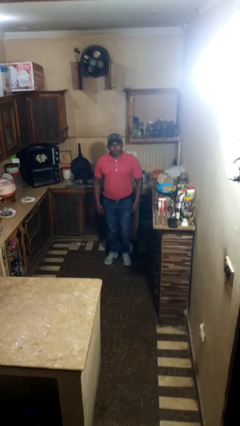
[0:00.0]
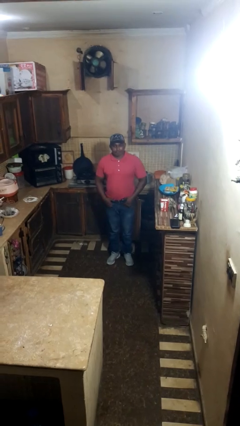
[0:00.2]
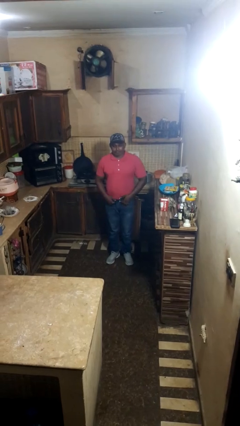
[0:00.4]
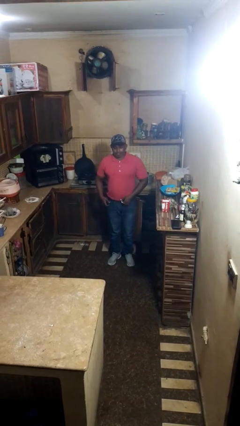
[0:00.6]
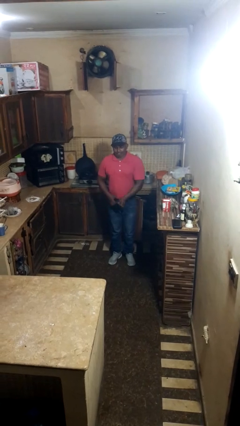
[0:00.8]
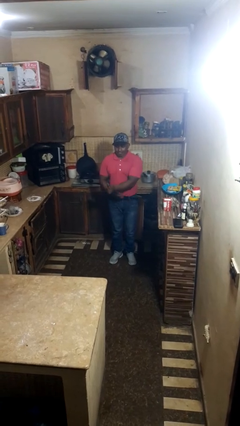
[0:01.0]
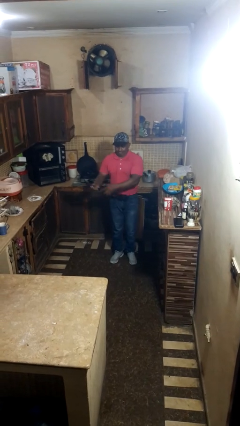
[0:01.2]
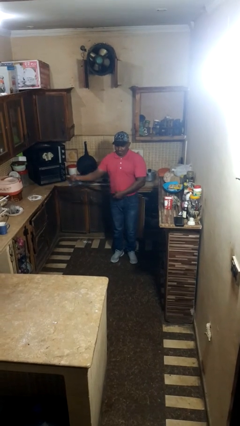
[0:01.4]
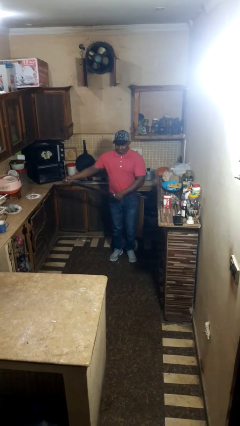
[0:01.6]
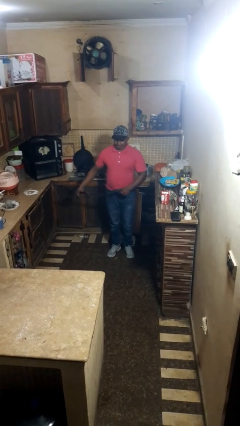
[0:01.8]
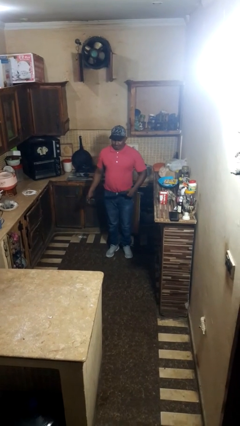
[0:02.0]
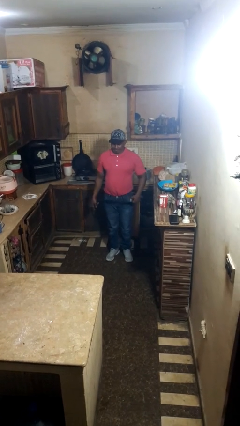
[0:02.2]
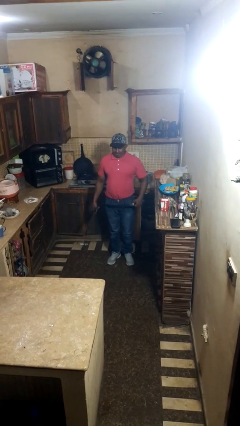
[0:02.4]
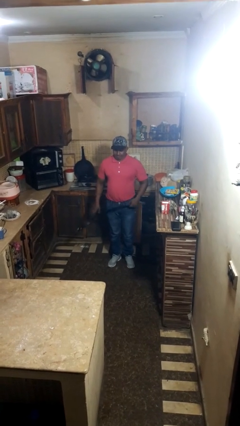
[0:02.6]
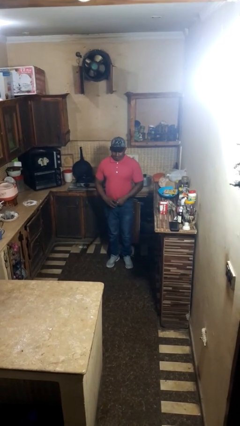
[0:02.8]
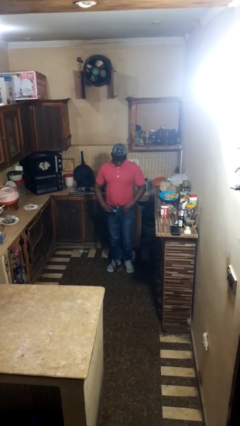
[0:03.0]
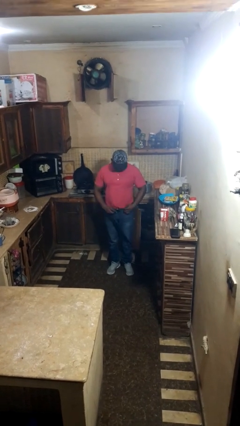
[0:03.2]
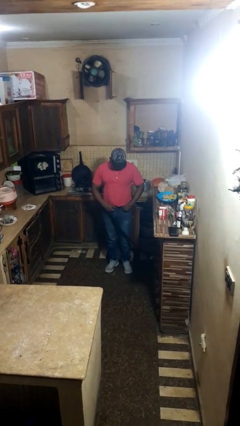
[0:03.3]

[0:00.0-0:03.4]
person takes off belt

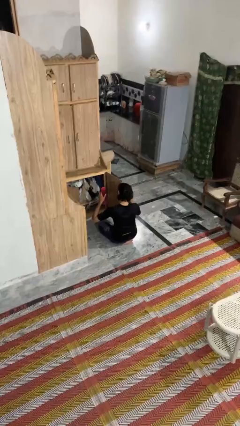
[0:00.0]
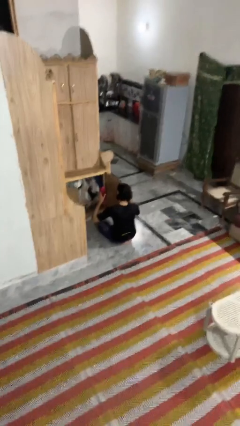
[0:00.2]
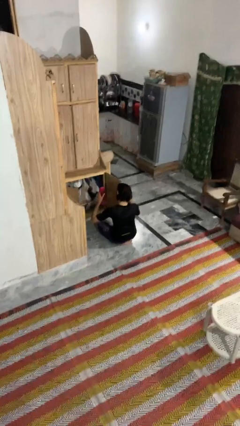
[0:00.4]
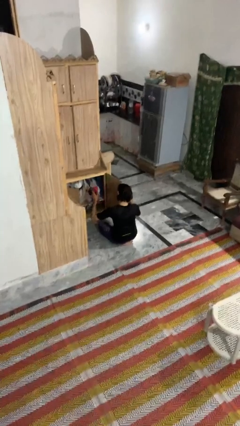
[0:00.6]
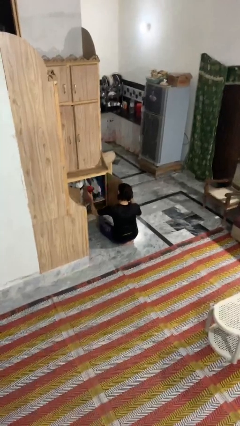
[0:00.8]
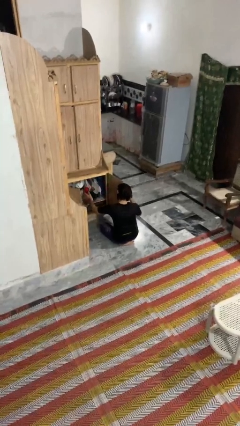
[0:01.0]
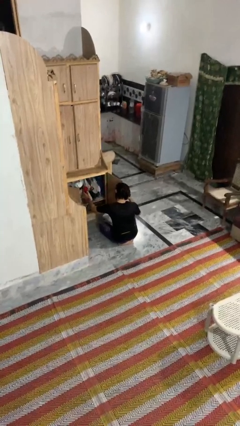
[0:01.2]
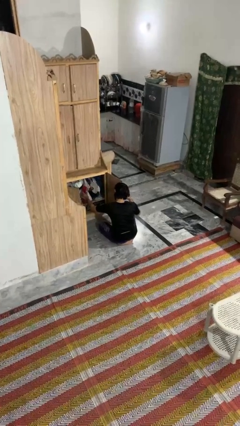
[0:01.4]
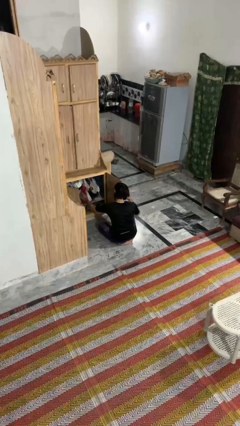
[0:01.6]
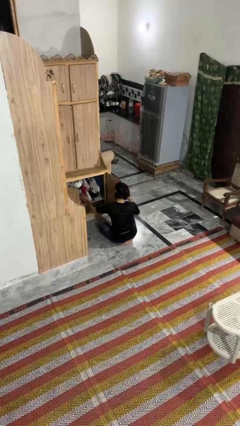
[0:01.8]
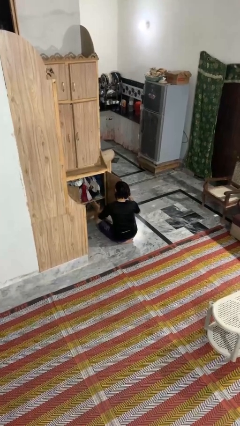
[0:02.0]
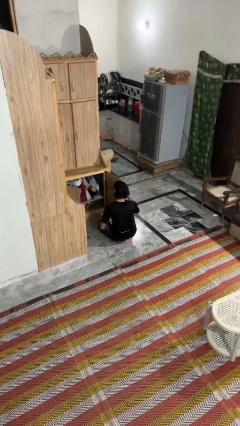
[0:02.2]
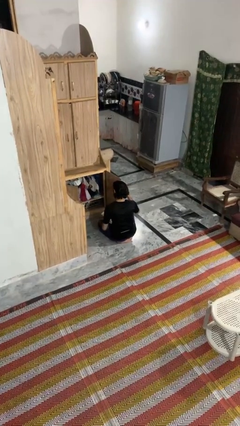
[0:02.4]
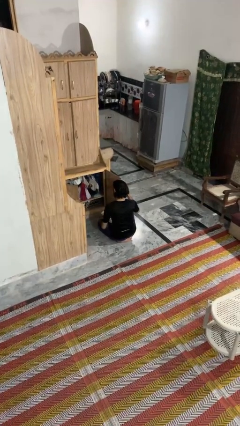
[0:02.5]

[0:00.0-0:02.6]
person puts down object into cabinet

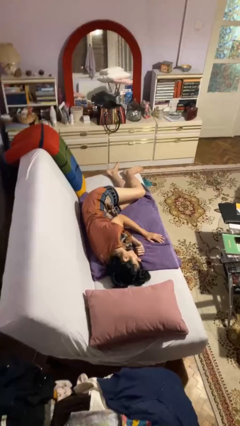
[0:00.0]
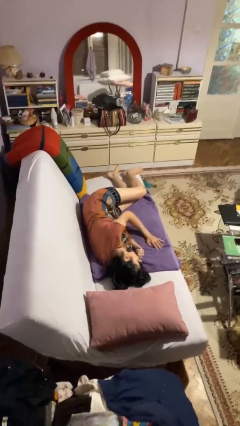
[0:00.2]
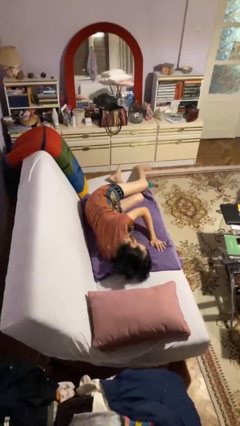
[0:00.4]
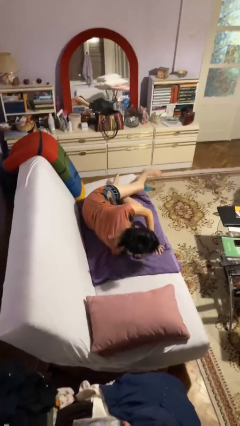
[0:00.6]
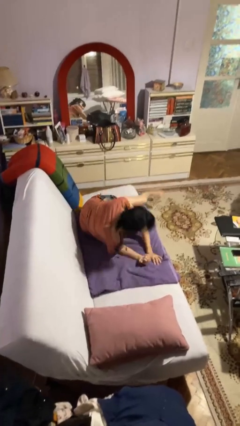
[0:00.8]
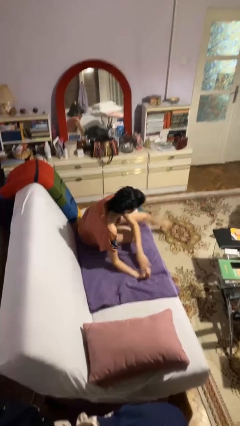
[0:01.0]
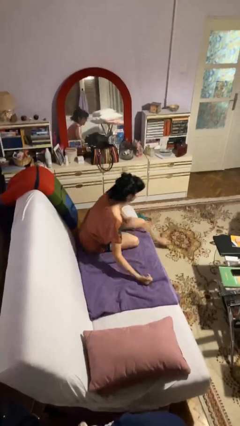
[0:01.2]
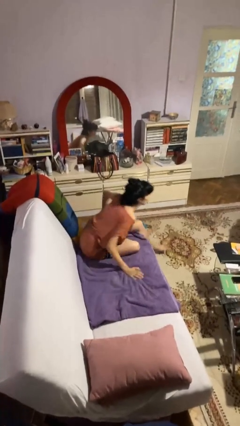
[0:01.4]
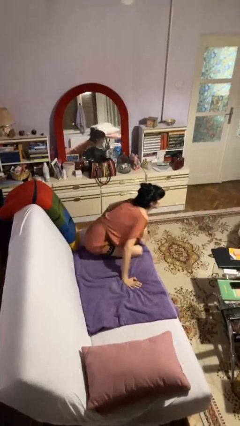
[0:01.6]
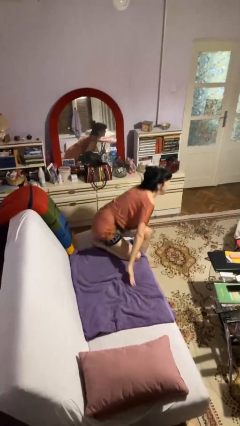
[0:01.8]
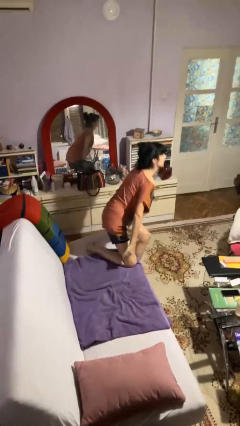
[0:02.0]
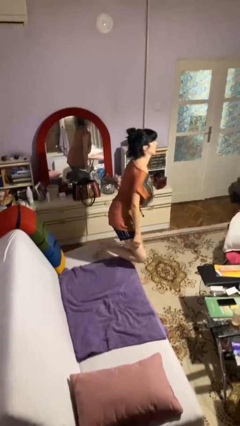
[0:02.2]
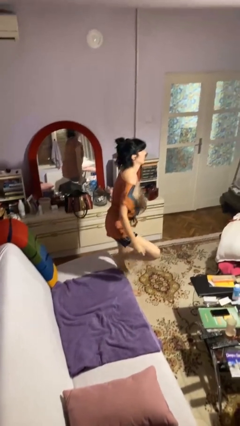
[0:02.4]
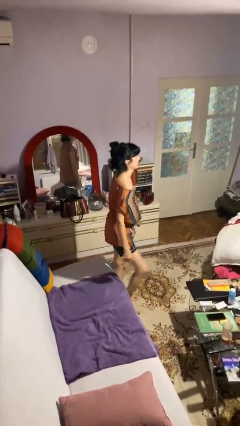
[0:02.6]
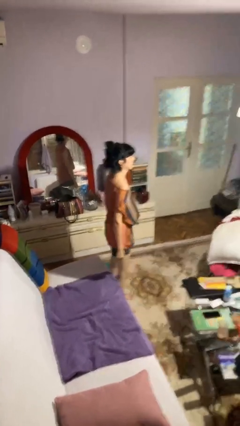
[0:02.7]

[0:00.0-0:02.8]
person stands up

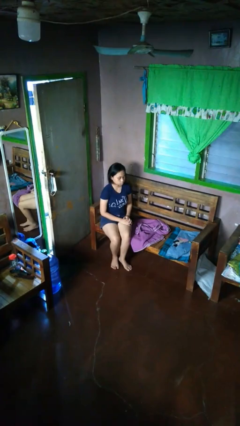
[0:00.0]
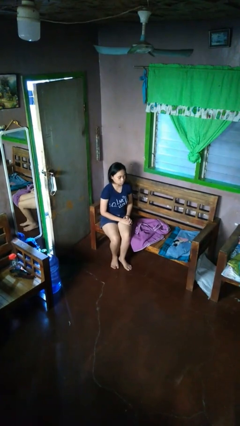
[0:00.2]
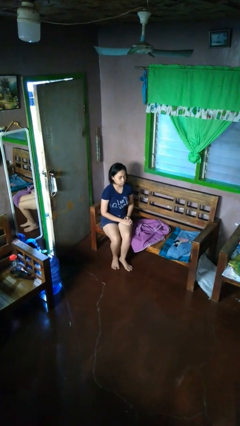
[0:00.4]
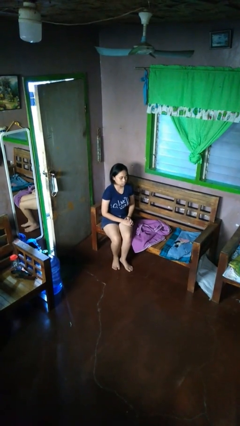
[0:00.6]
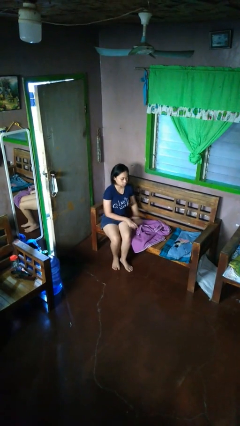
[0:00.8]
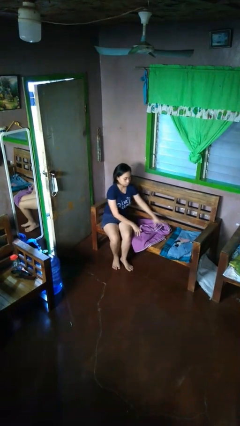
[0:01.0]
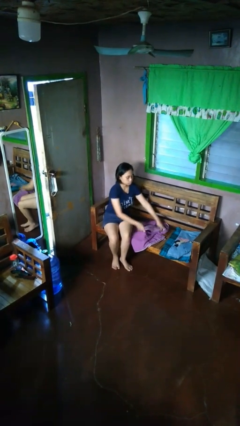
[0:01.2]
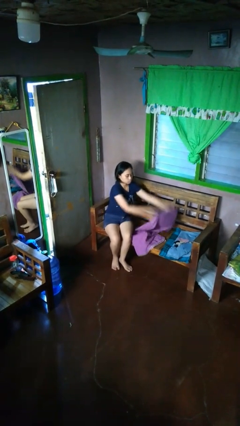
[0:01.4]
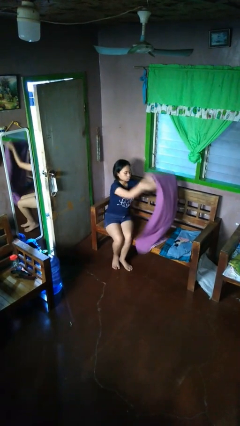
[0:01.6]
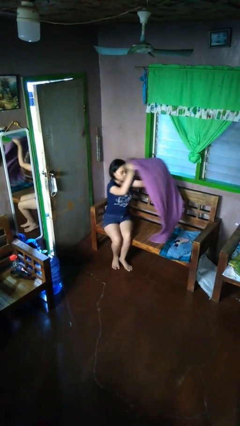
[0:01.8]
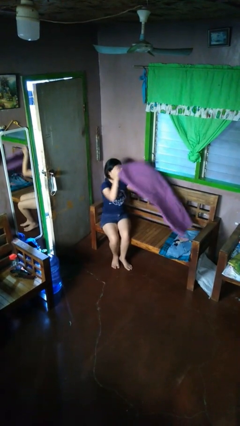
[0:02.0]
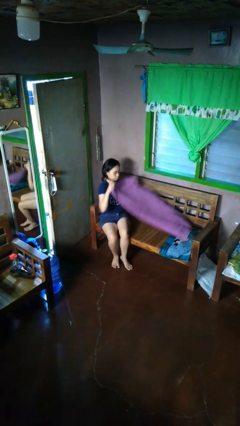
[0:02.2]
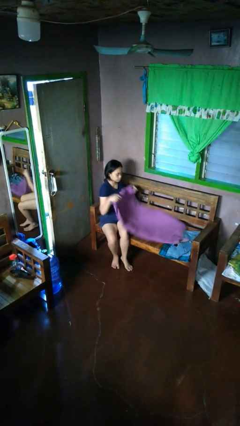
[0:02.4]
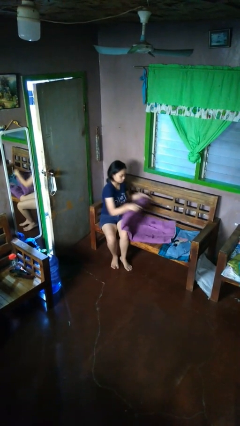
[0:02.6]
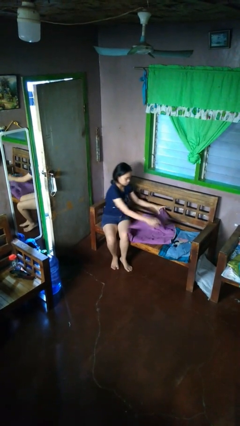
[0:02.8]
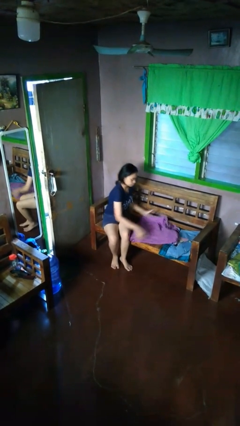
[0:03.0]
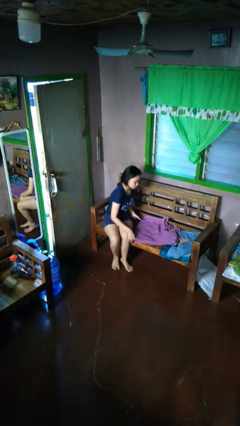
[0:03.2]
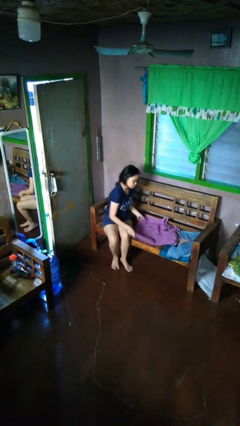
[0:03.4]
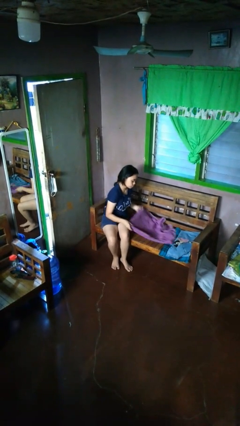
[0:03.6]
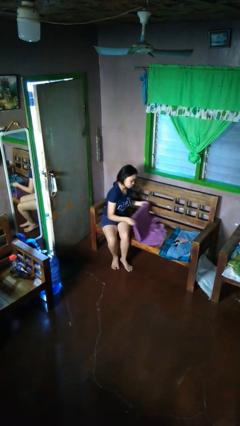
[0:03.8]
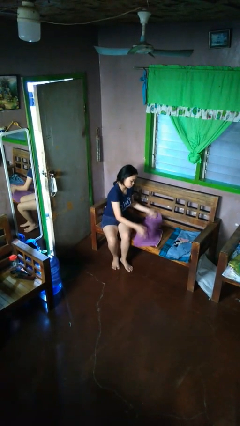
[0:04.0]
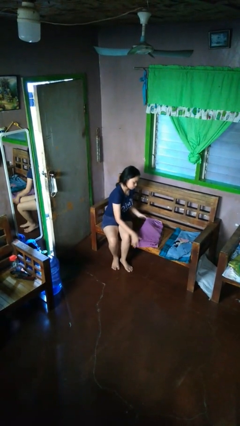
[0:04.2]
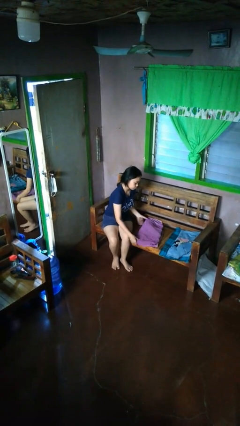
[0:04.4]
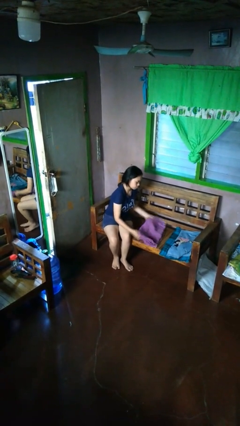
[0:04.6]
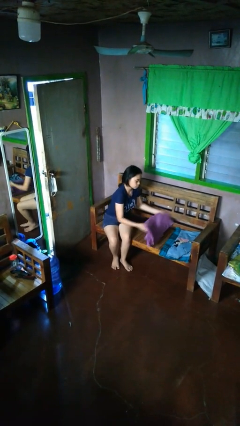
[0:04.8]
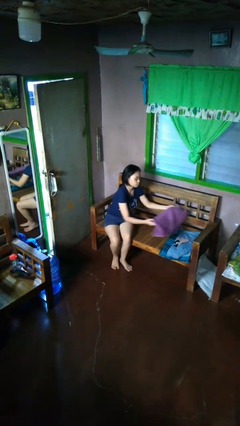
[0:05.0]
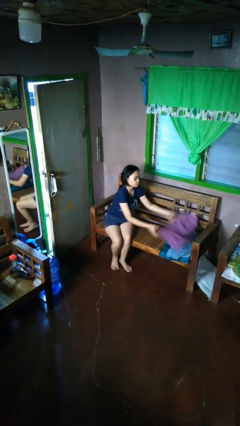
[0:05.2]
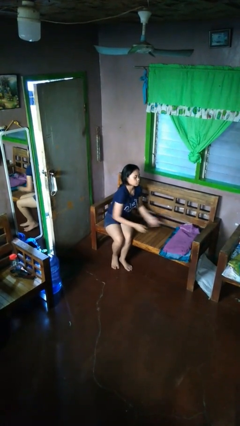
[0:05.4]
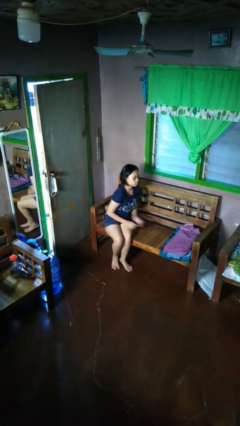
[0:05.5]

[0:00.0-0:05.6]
person folds blanket

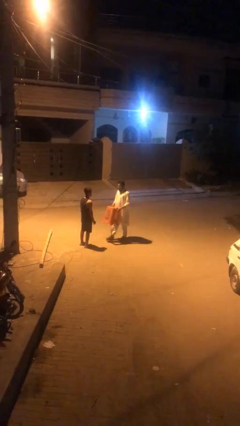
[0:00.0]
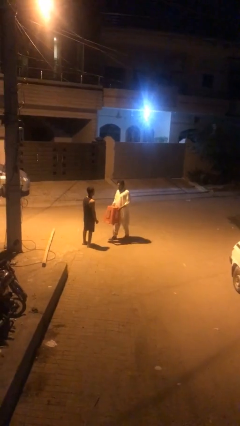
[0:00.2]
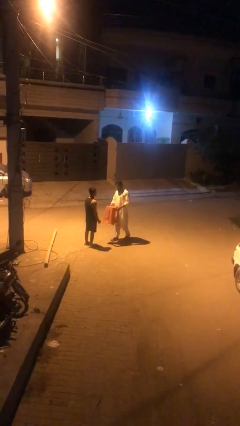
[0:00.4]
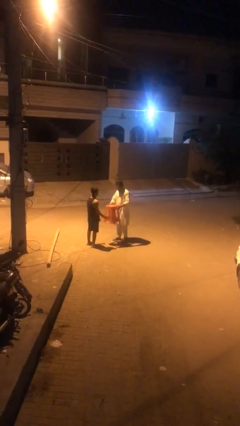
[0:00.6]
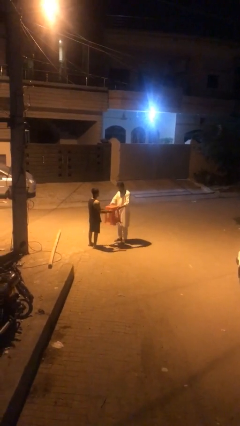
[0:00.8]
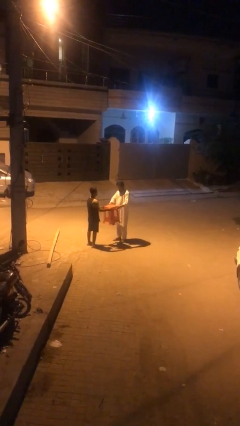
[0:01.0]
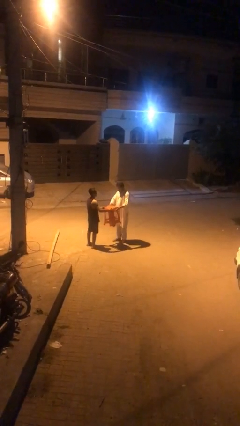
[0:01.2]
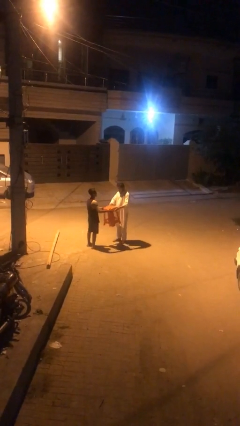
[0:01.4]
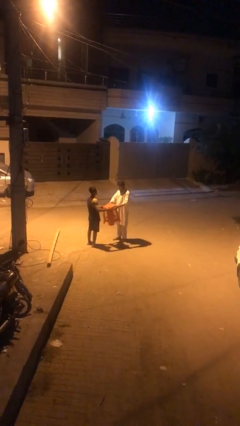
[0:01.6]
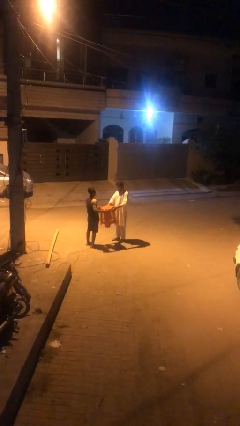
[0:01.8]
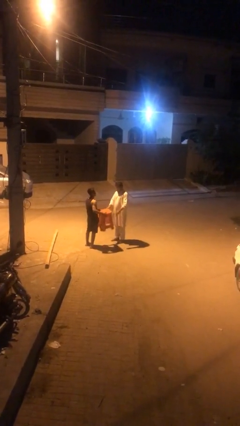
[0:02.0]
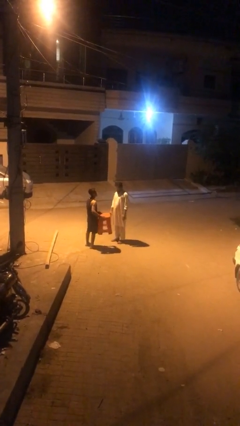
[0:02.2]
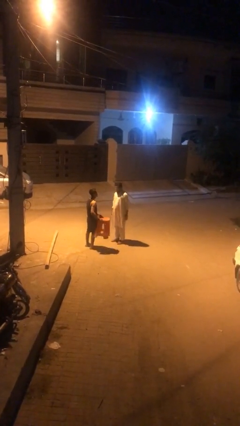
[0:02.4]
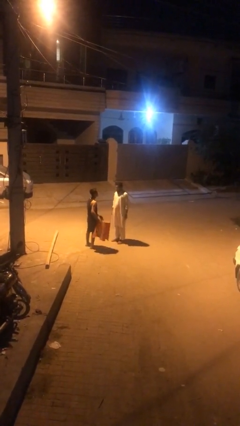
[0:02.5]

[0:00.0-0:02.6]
person transfers object to person

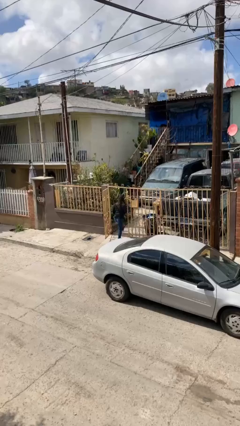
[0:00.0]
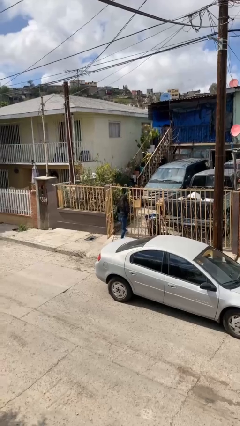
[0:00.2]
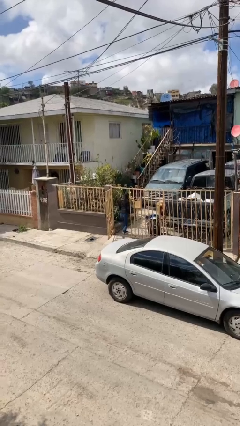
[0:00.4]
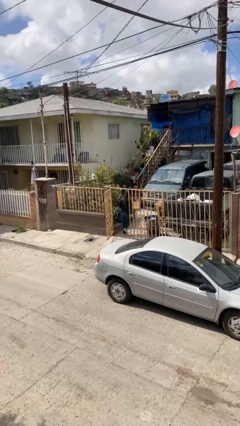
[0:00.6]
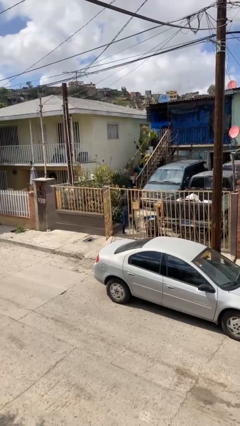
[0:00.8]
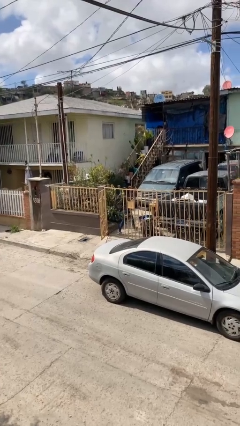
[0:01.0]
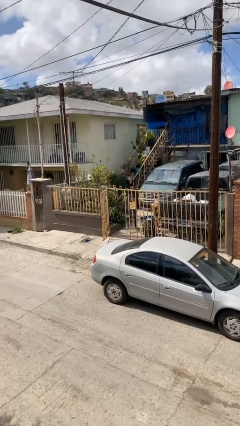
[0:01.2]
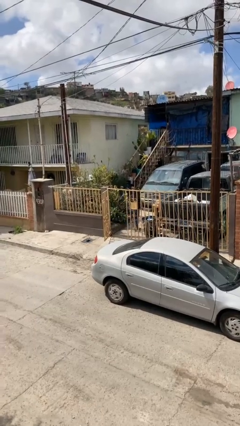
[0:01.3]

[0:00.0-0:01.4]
person exits scene through structure
